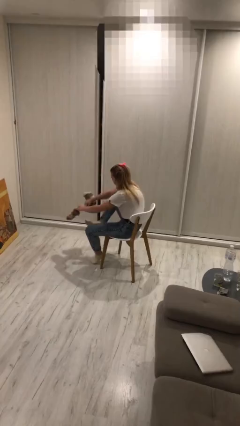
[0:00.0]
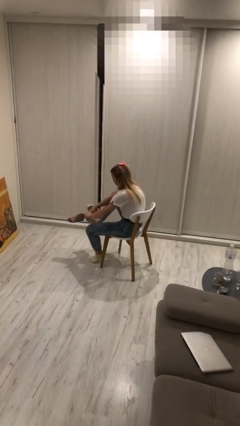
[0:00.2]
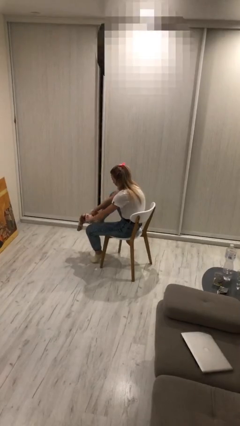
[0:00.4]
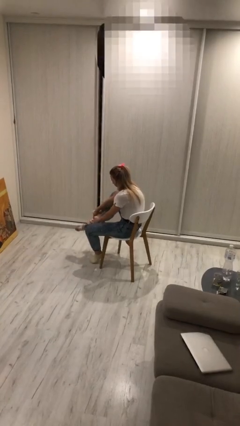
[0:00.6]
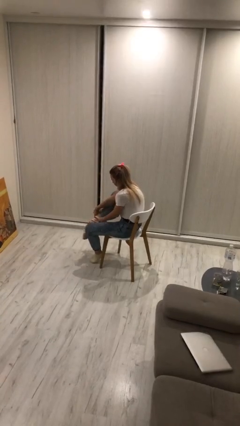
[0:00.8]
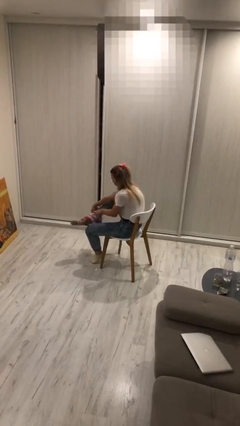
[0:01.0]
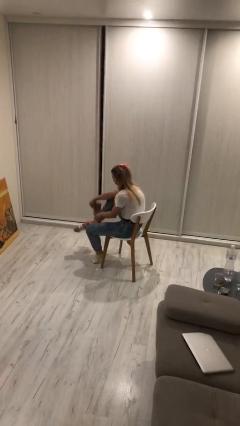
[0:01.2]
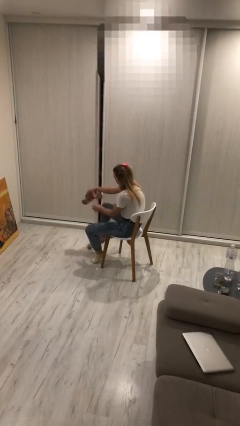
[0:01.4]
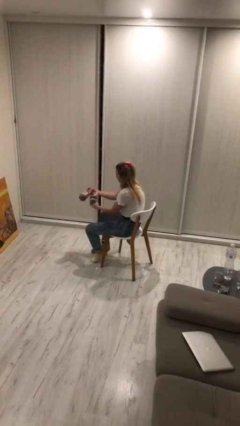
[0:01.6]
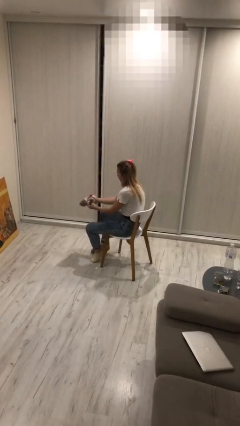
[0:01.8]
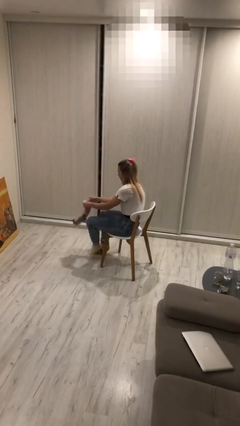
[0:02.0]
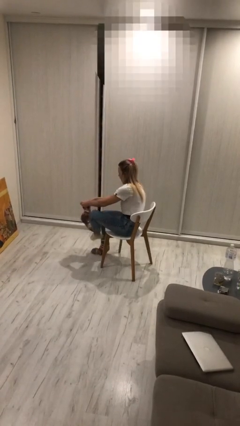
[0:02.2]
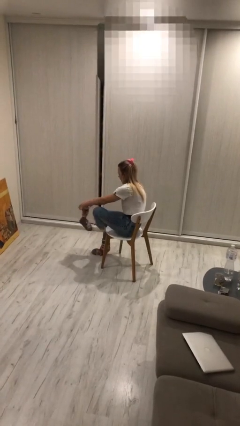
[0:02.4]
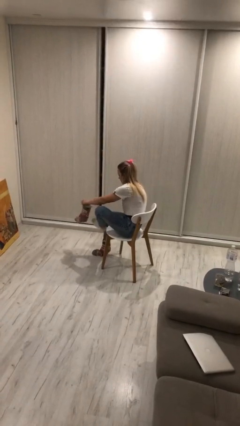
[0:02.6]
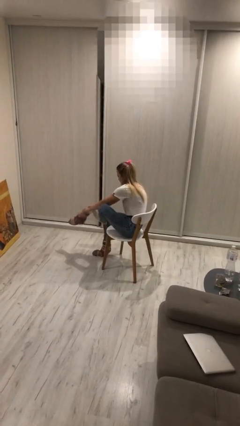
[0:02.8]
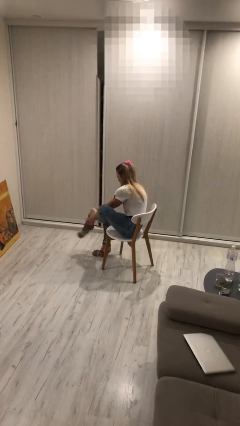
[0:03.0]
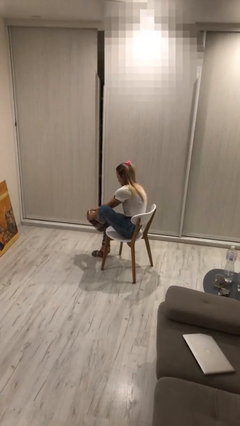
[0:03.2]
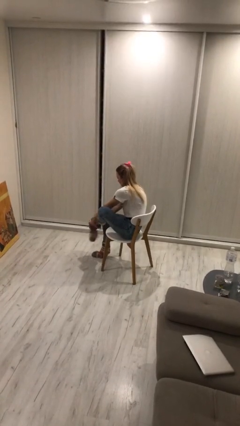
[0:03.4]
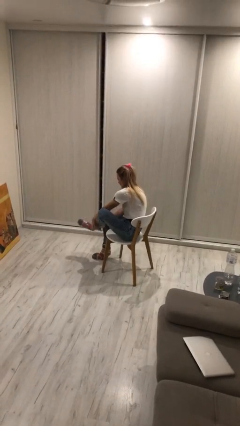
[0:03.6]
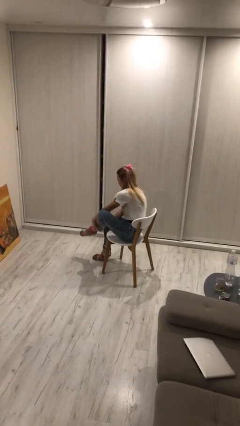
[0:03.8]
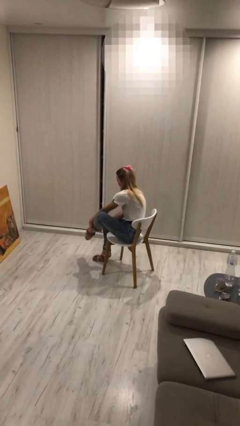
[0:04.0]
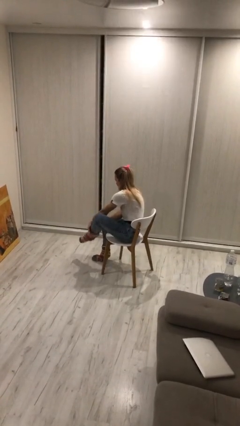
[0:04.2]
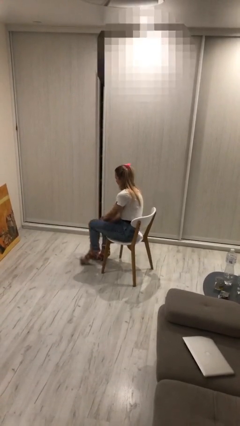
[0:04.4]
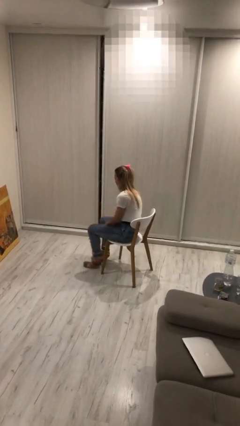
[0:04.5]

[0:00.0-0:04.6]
person puts on socks

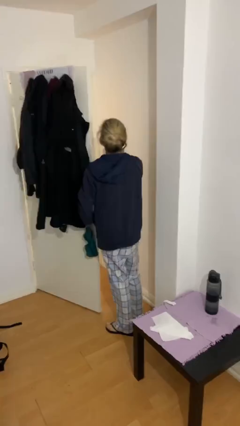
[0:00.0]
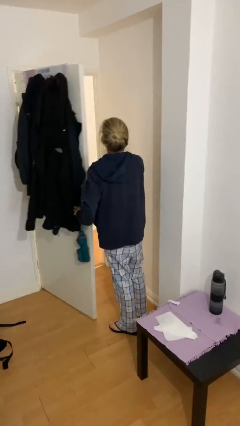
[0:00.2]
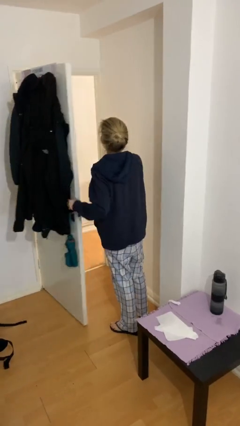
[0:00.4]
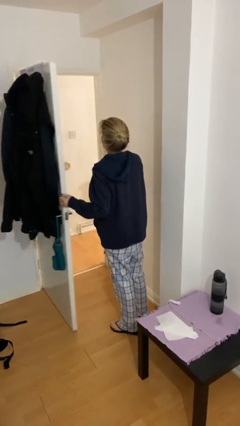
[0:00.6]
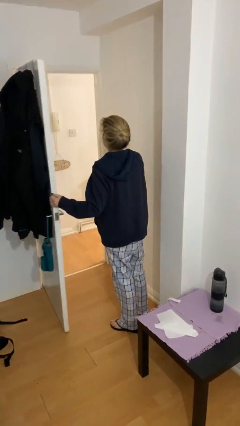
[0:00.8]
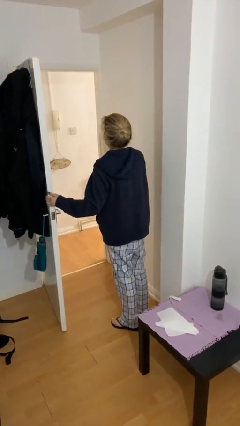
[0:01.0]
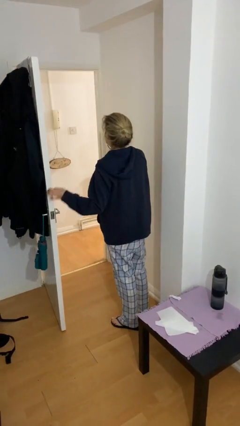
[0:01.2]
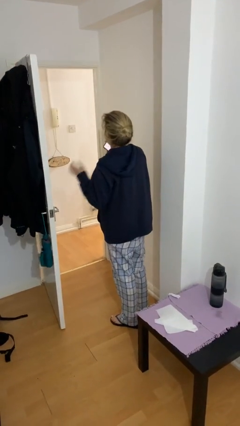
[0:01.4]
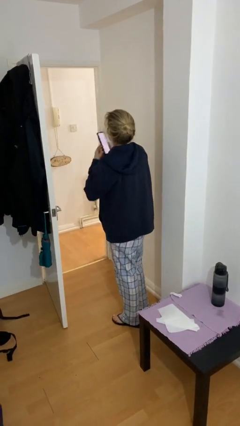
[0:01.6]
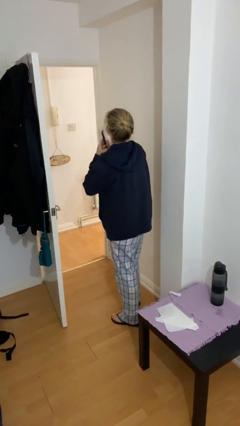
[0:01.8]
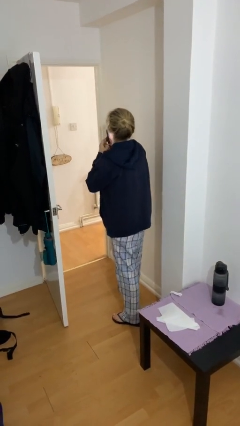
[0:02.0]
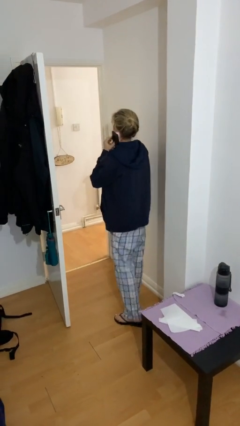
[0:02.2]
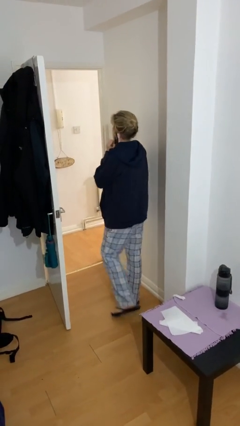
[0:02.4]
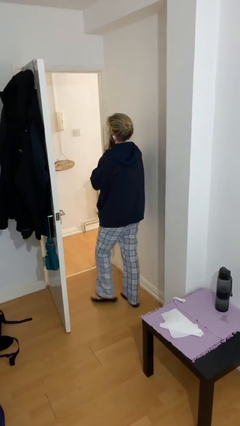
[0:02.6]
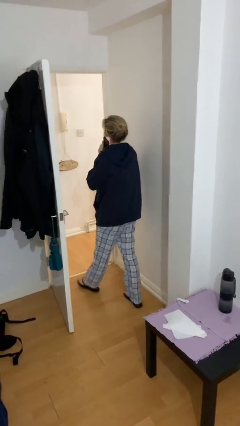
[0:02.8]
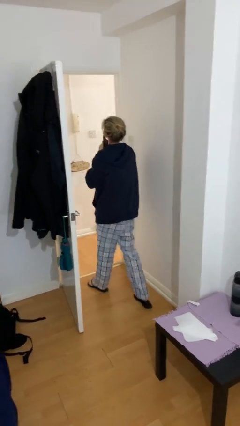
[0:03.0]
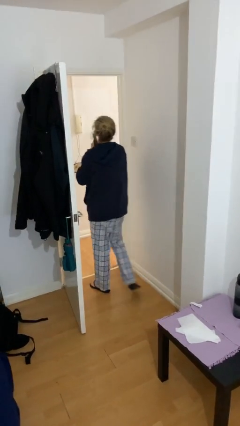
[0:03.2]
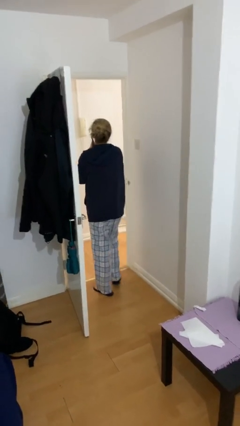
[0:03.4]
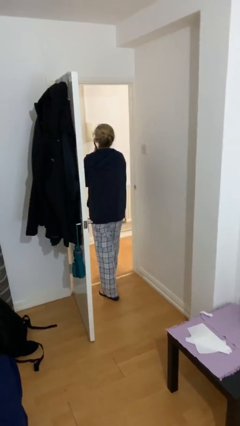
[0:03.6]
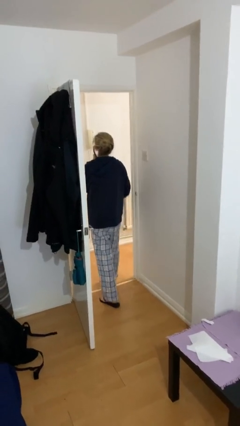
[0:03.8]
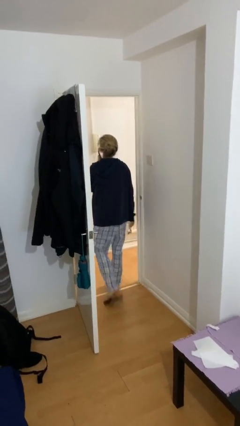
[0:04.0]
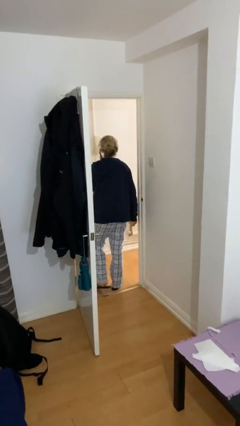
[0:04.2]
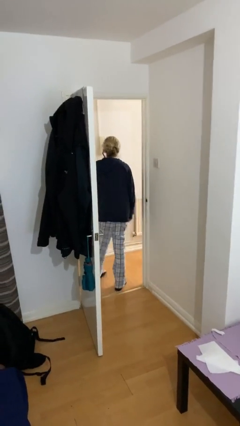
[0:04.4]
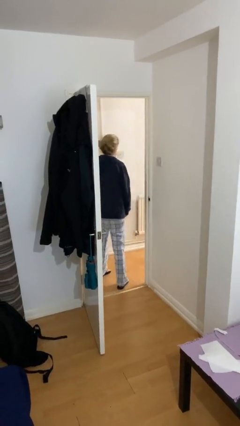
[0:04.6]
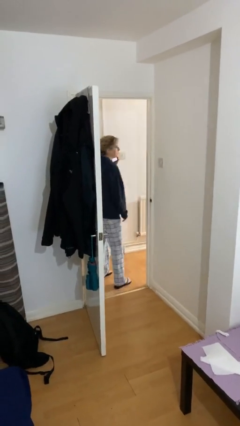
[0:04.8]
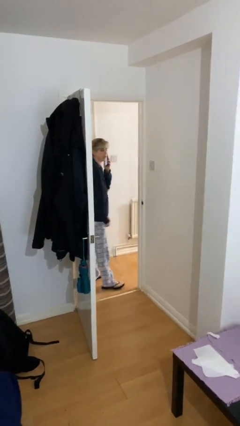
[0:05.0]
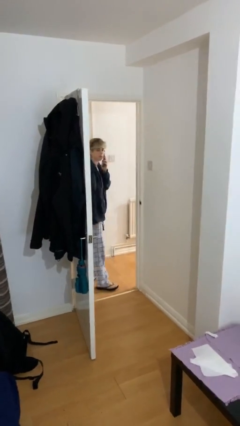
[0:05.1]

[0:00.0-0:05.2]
person exits scene through structure

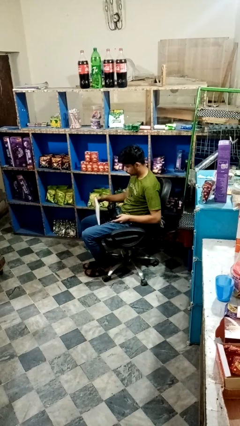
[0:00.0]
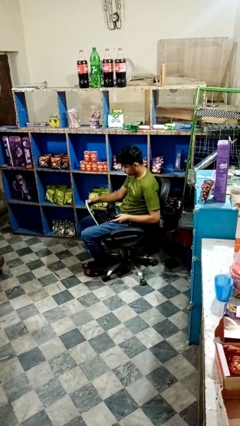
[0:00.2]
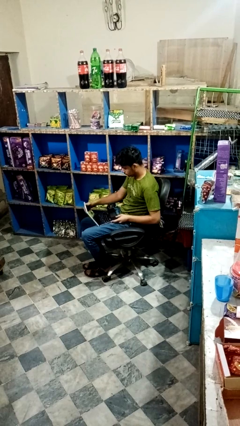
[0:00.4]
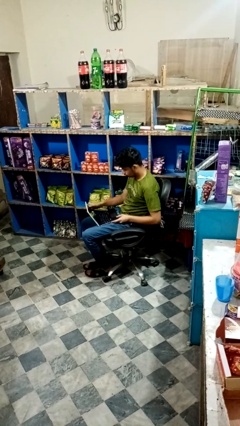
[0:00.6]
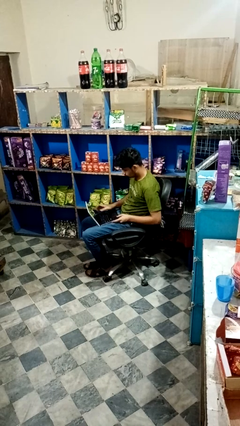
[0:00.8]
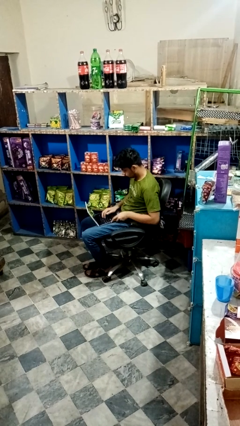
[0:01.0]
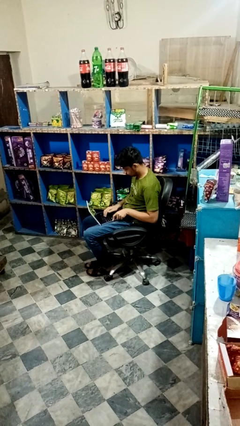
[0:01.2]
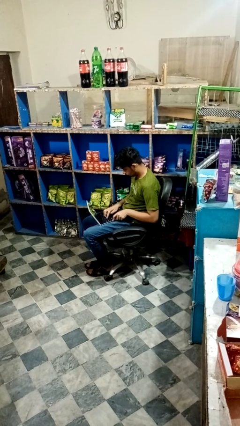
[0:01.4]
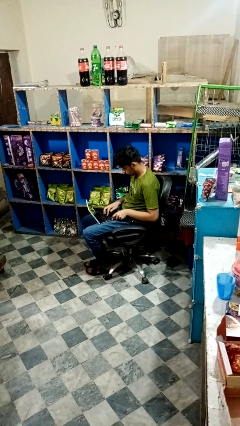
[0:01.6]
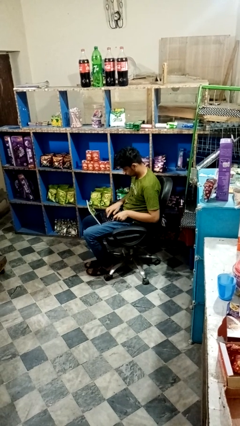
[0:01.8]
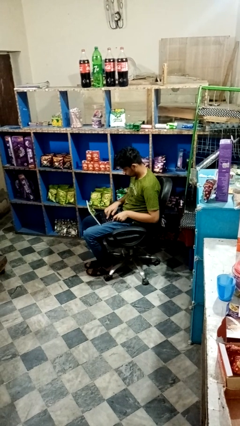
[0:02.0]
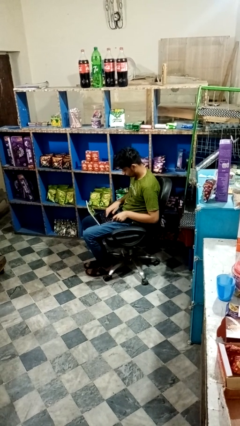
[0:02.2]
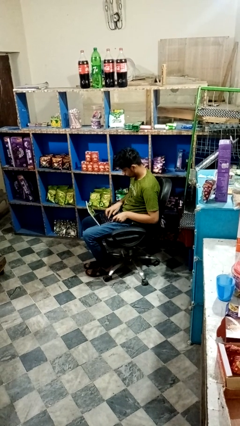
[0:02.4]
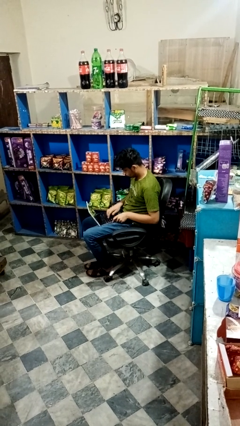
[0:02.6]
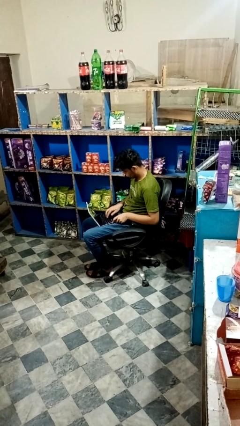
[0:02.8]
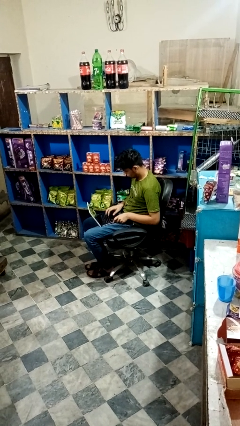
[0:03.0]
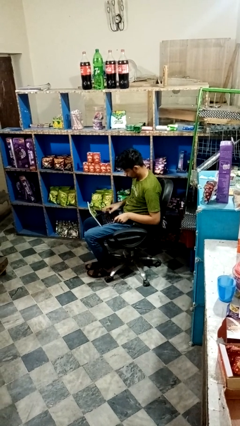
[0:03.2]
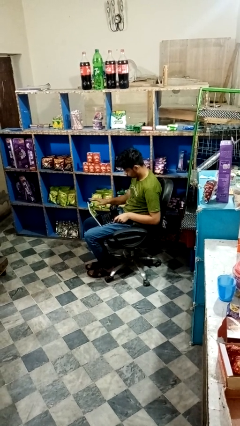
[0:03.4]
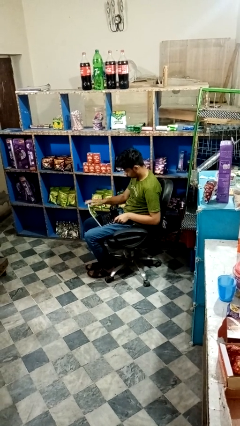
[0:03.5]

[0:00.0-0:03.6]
person opens laptop

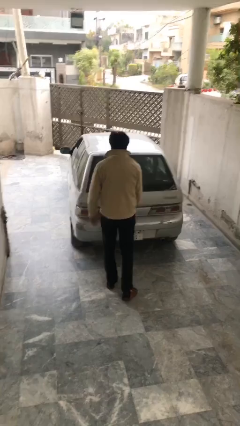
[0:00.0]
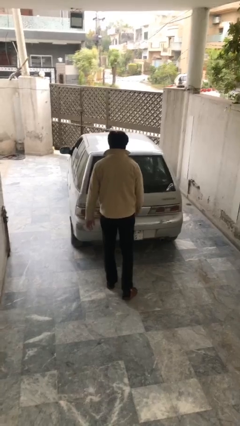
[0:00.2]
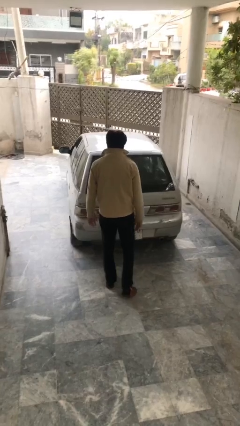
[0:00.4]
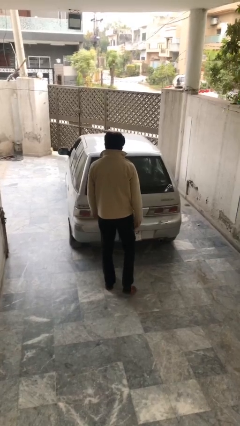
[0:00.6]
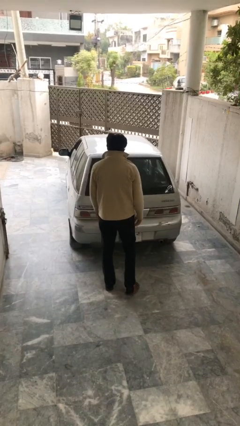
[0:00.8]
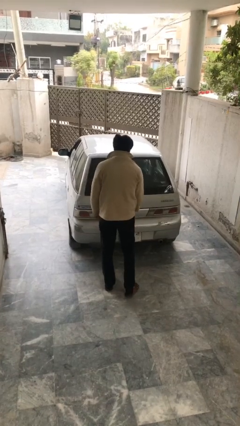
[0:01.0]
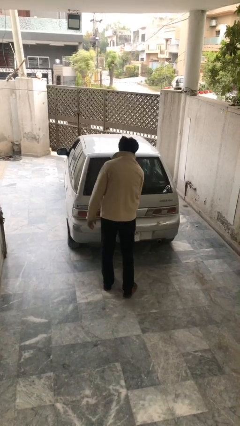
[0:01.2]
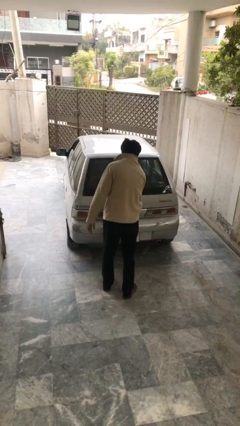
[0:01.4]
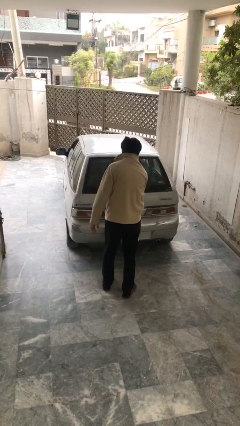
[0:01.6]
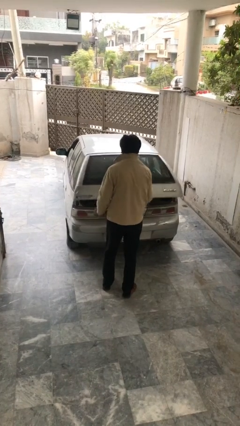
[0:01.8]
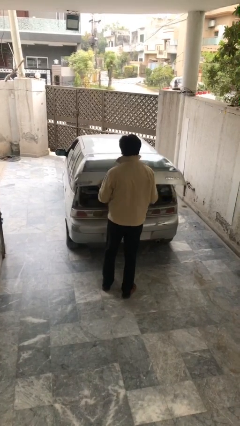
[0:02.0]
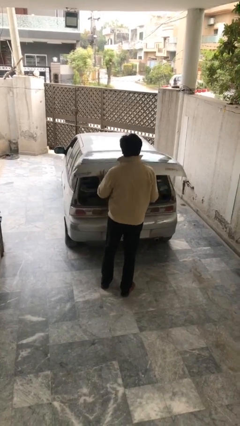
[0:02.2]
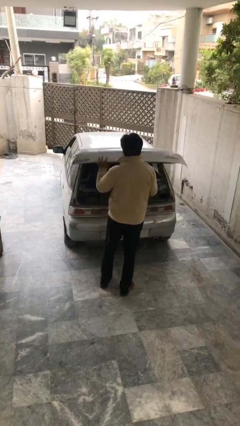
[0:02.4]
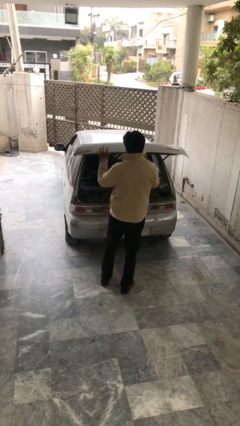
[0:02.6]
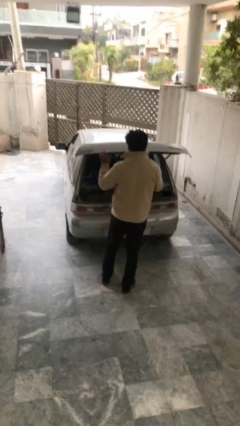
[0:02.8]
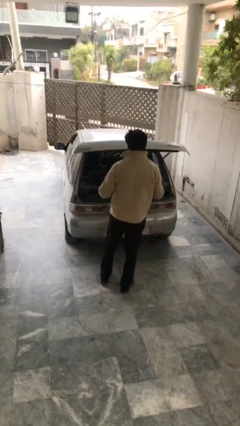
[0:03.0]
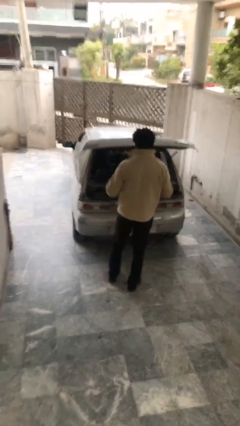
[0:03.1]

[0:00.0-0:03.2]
person opens car trunk

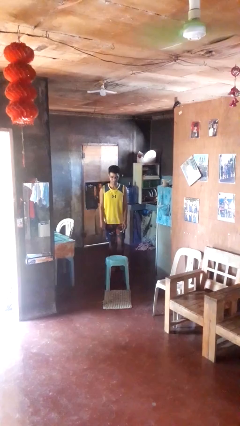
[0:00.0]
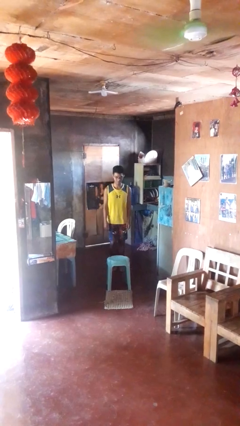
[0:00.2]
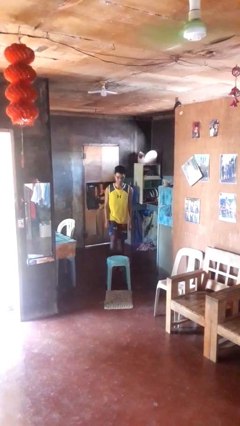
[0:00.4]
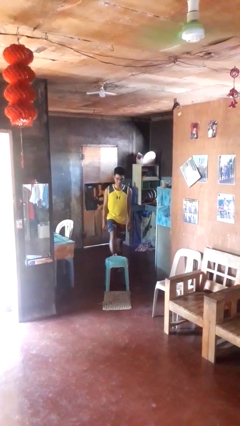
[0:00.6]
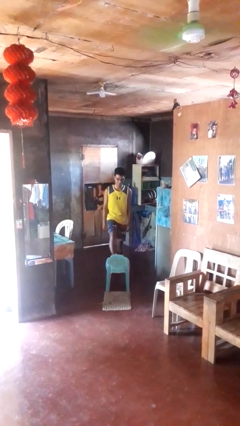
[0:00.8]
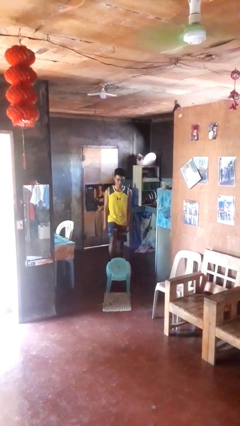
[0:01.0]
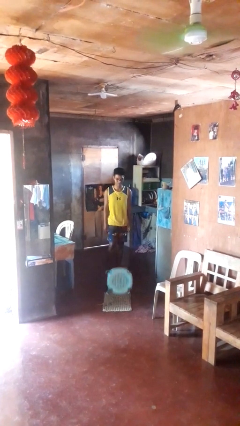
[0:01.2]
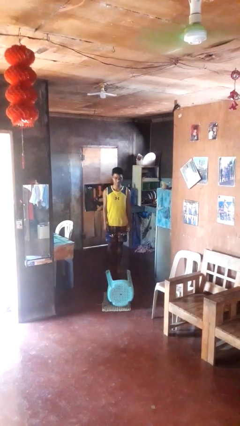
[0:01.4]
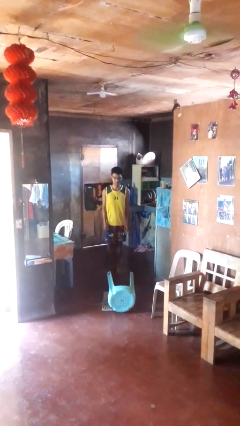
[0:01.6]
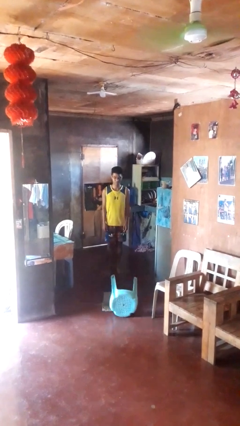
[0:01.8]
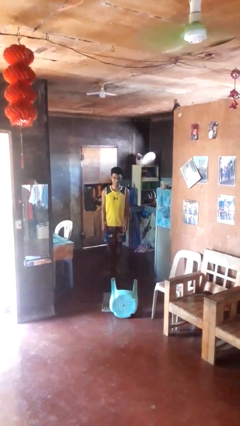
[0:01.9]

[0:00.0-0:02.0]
person knocks over furniture
